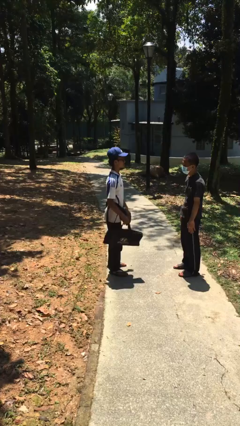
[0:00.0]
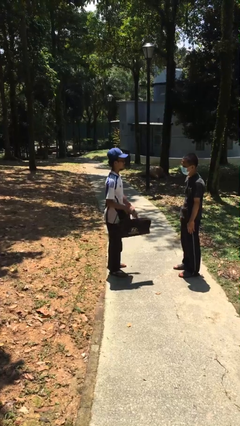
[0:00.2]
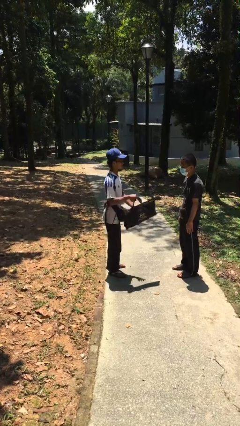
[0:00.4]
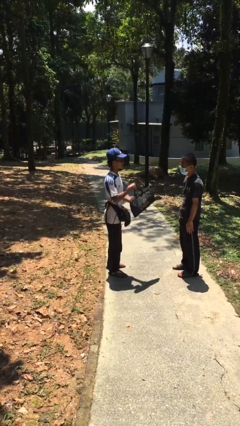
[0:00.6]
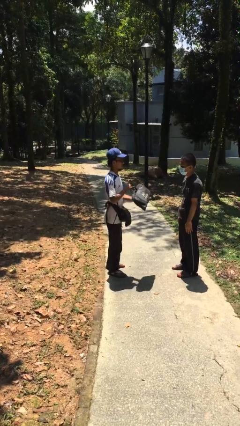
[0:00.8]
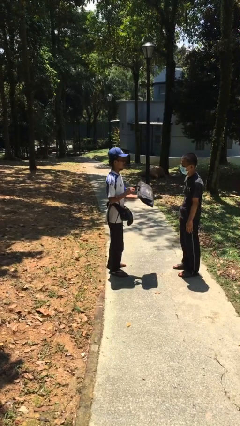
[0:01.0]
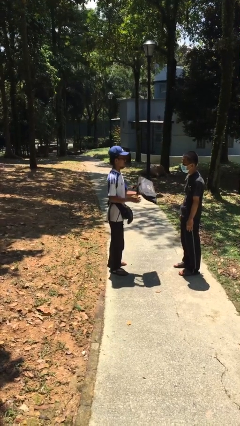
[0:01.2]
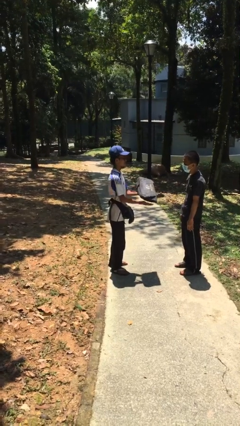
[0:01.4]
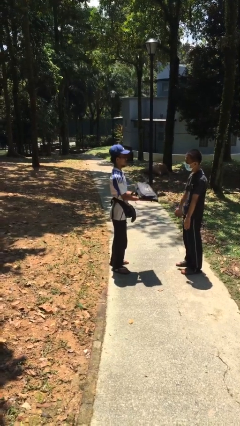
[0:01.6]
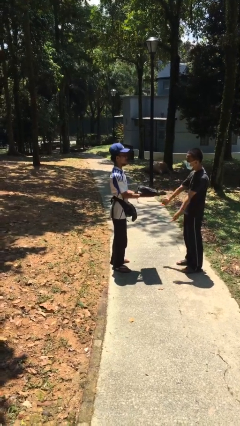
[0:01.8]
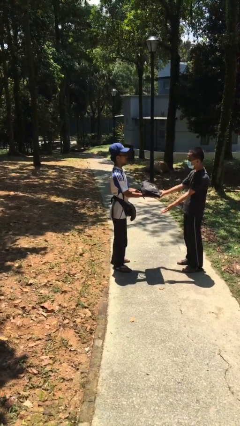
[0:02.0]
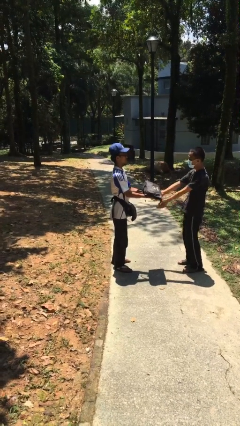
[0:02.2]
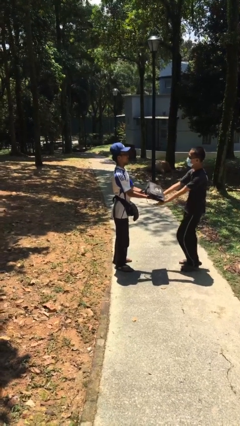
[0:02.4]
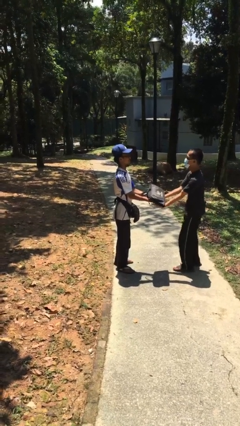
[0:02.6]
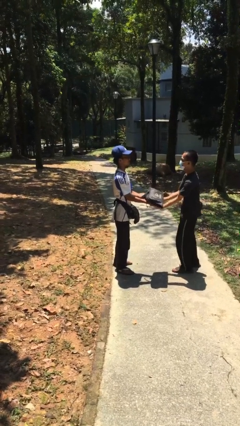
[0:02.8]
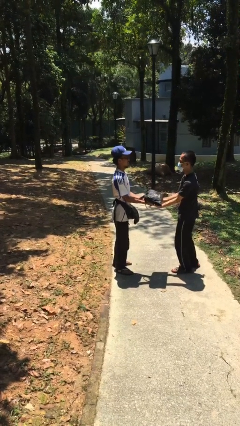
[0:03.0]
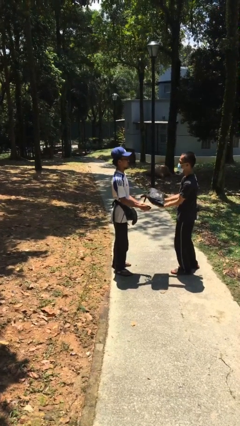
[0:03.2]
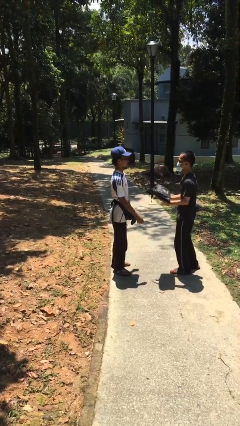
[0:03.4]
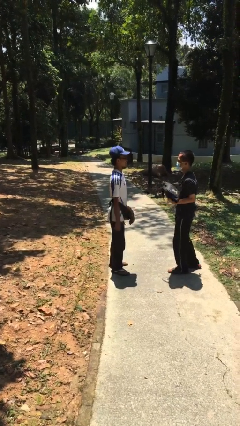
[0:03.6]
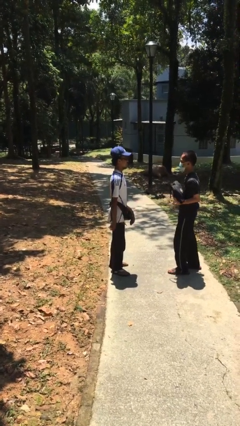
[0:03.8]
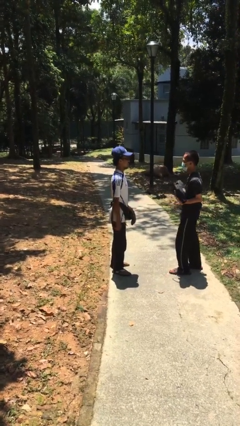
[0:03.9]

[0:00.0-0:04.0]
person transfers object to person

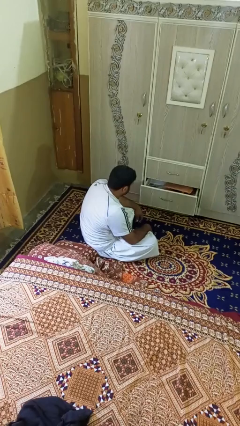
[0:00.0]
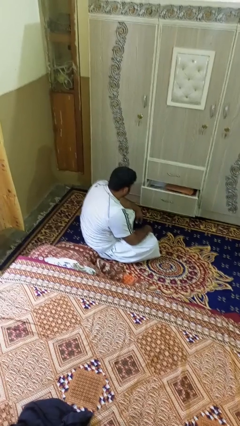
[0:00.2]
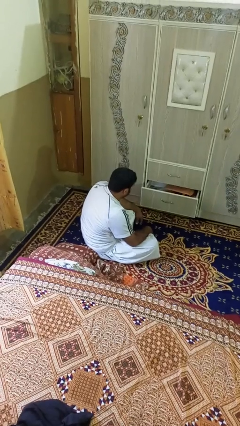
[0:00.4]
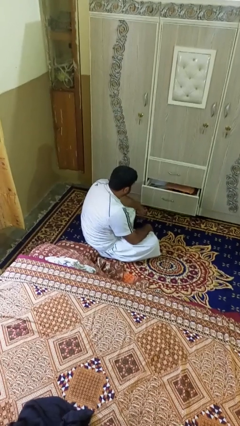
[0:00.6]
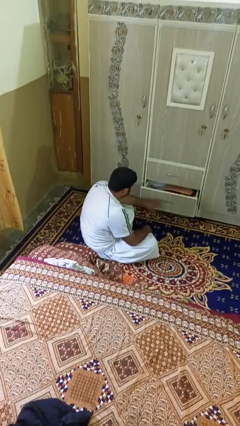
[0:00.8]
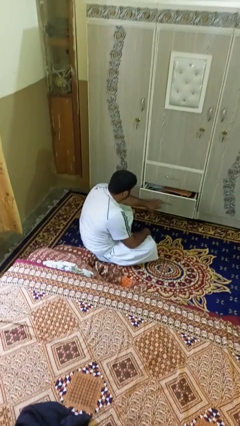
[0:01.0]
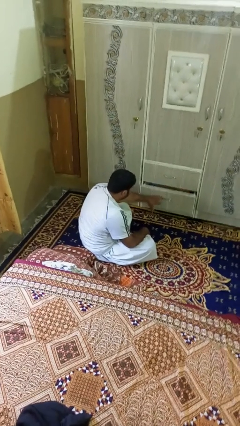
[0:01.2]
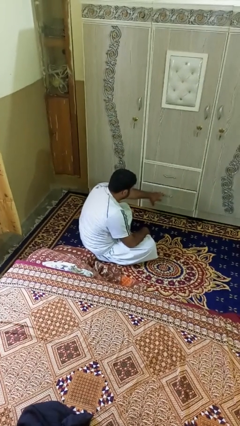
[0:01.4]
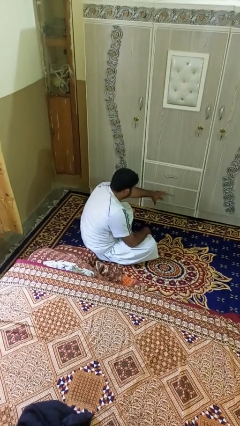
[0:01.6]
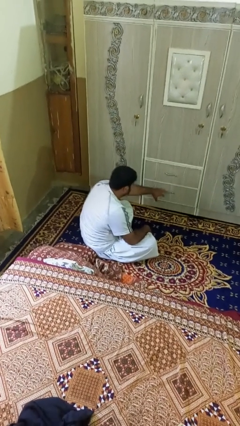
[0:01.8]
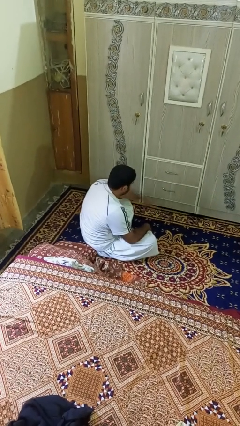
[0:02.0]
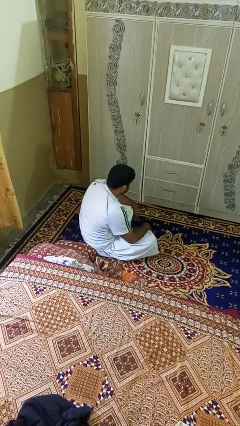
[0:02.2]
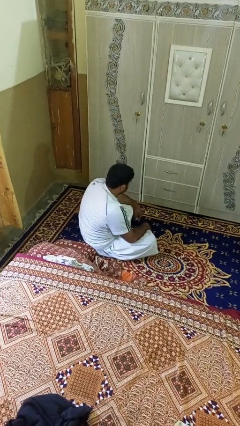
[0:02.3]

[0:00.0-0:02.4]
person closes dresser drawer

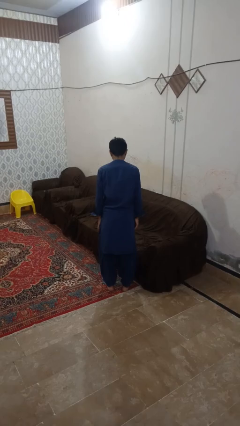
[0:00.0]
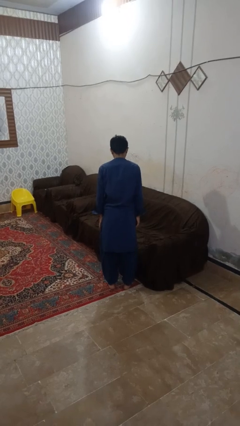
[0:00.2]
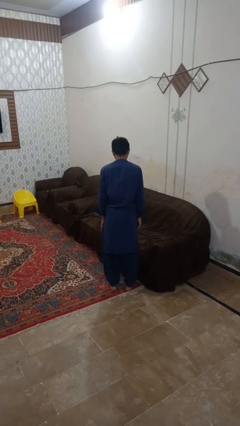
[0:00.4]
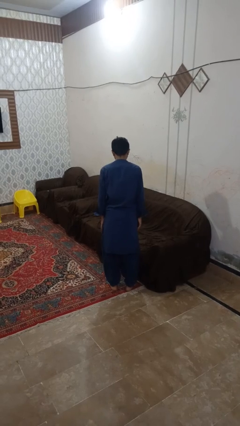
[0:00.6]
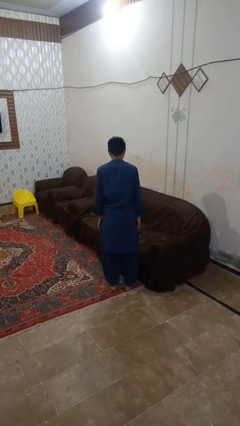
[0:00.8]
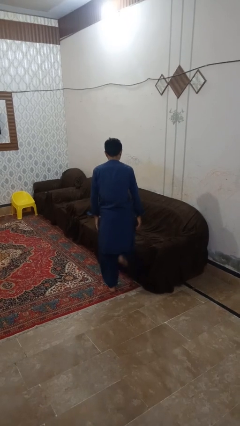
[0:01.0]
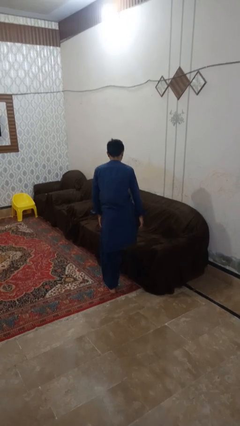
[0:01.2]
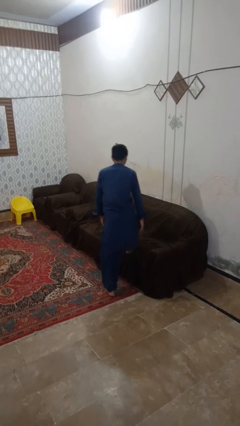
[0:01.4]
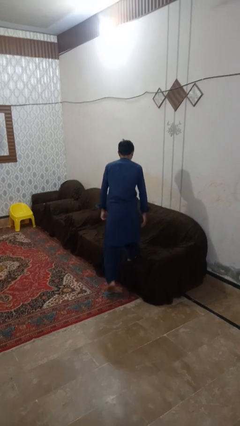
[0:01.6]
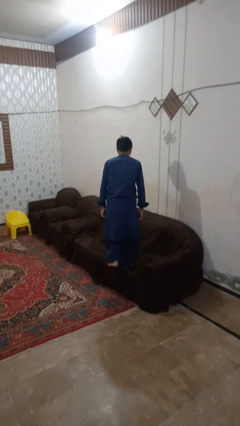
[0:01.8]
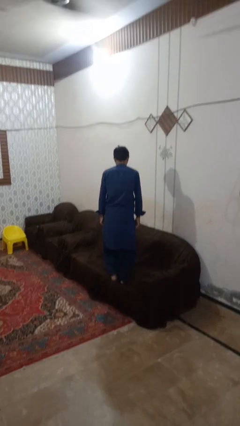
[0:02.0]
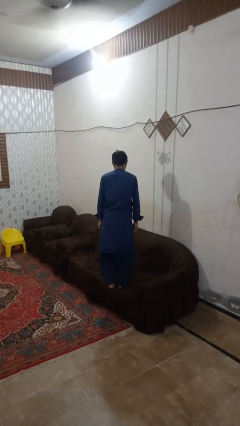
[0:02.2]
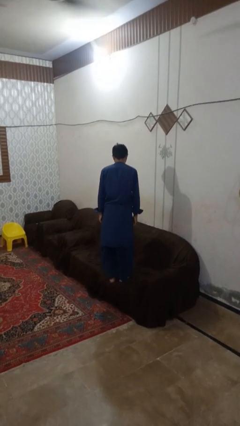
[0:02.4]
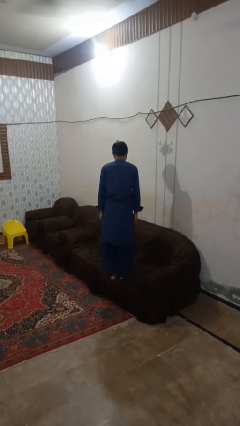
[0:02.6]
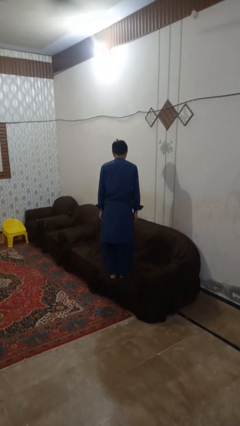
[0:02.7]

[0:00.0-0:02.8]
person climbs on couch

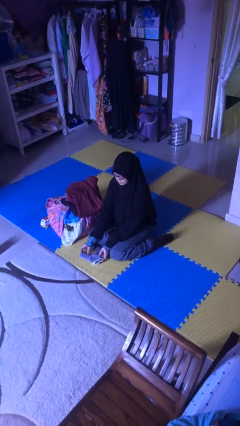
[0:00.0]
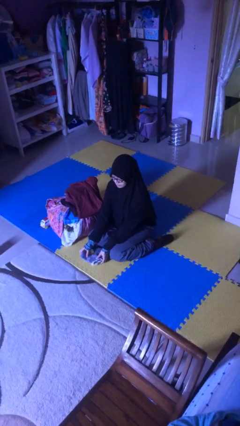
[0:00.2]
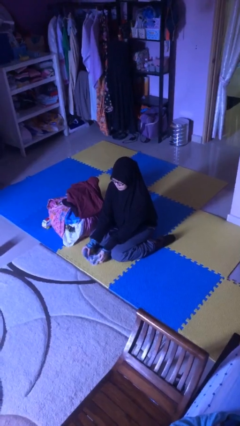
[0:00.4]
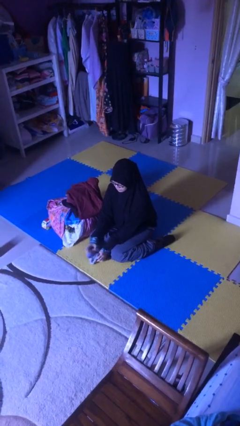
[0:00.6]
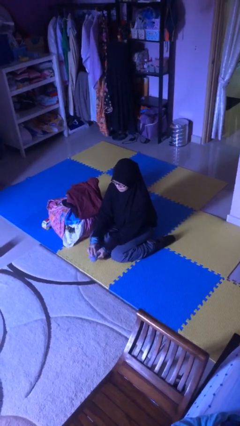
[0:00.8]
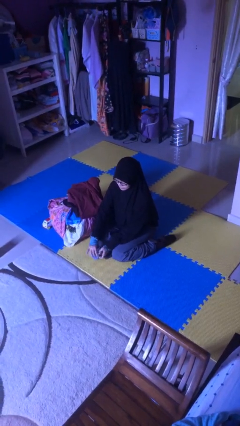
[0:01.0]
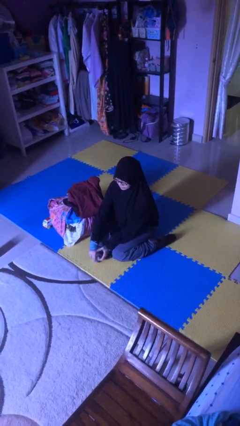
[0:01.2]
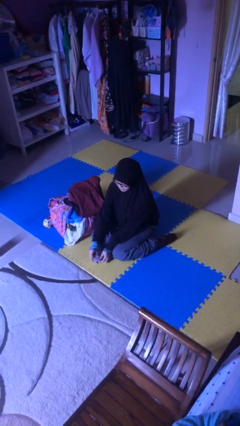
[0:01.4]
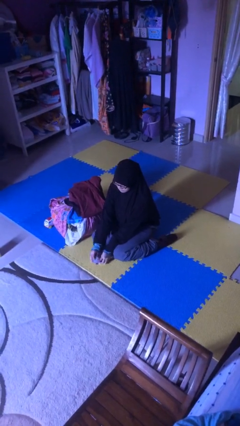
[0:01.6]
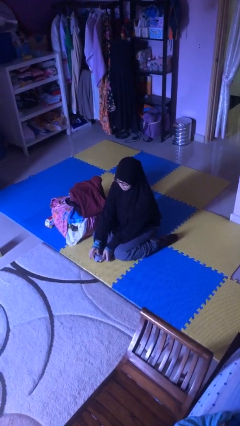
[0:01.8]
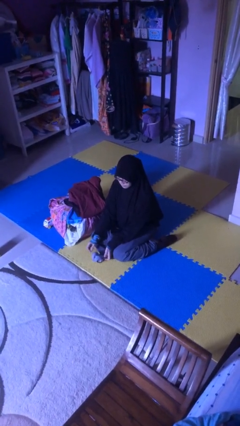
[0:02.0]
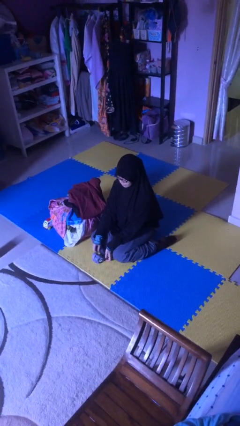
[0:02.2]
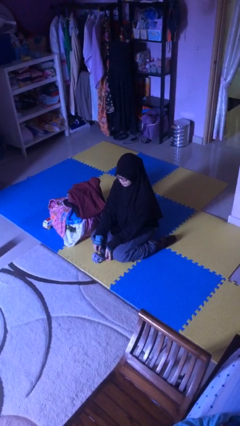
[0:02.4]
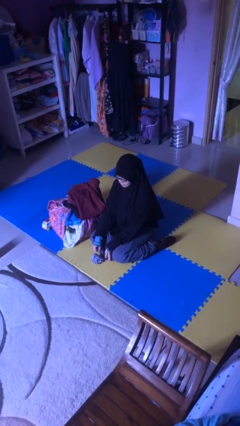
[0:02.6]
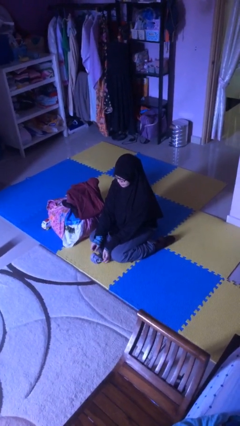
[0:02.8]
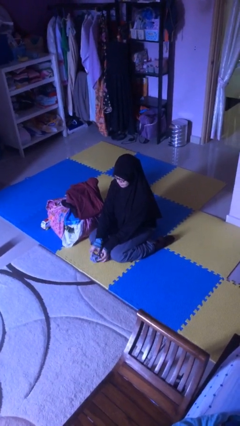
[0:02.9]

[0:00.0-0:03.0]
person folds socks

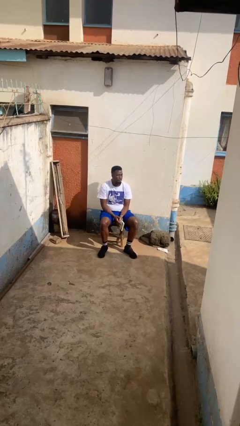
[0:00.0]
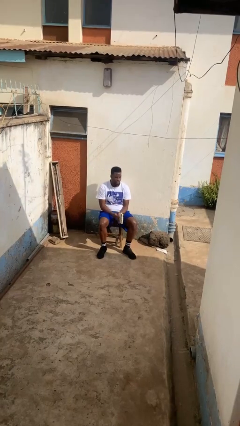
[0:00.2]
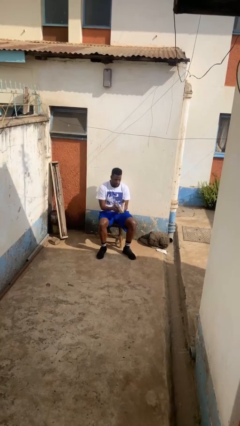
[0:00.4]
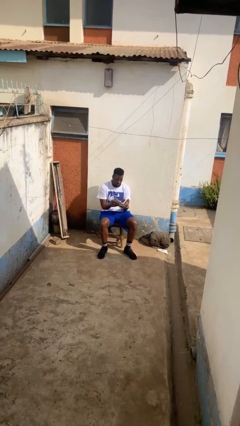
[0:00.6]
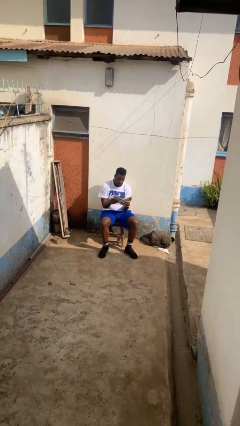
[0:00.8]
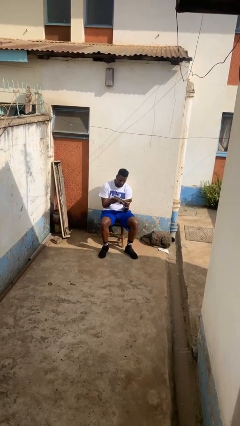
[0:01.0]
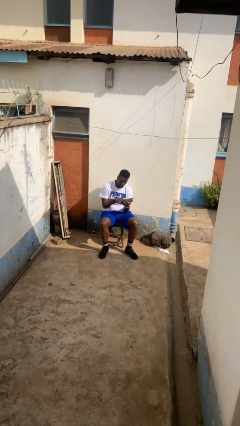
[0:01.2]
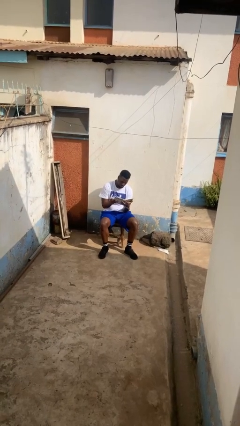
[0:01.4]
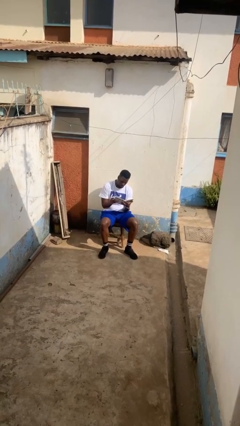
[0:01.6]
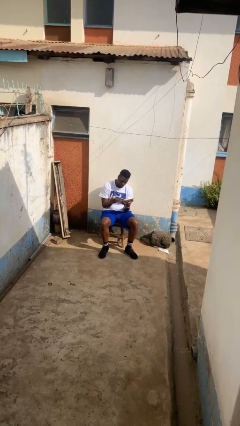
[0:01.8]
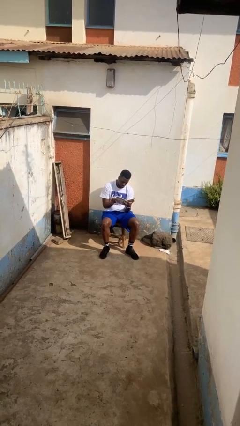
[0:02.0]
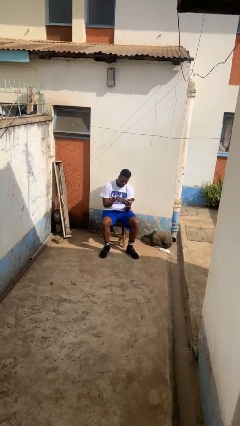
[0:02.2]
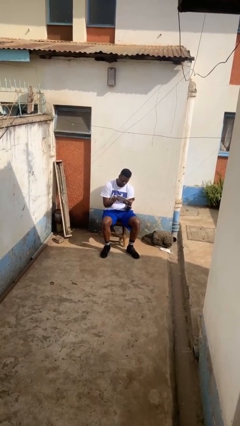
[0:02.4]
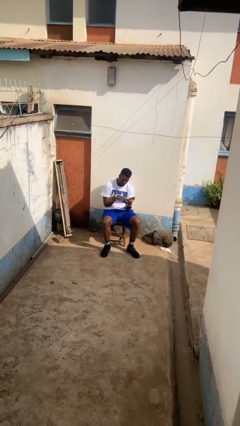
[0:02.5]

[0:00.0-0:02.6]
person reads book

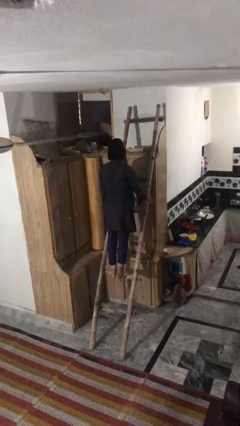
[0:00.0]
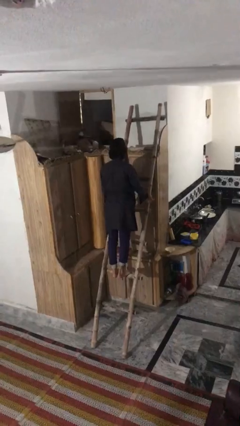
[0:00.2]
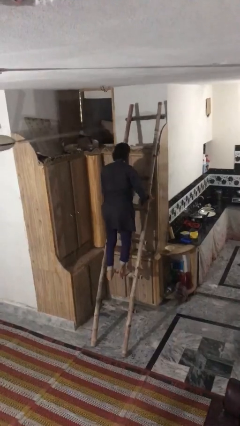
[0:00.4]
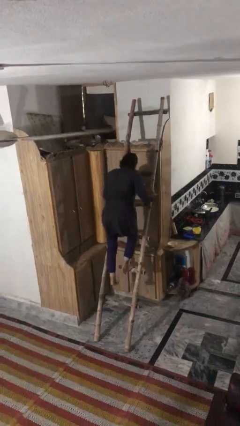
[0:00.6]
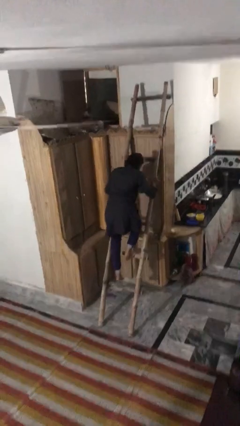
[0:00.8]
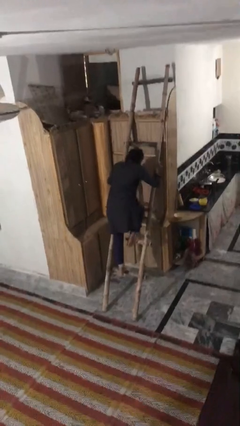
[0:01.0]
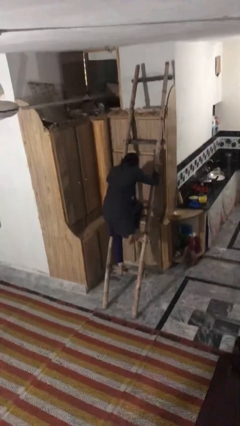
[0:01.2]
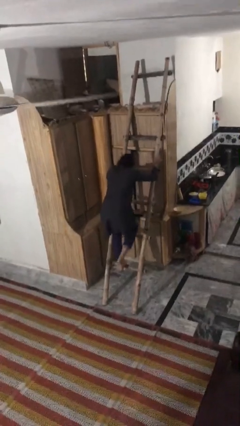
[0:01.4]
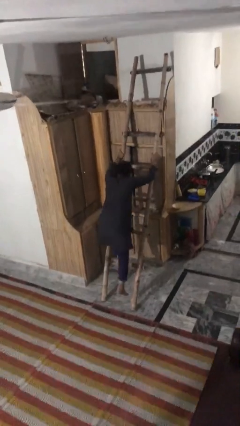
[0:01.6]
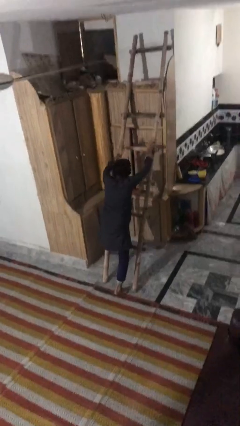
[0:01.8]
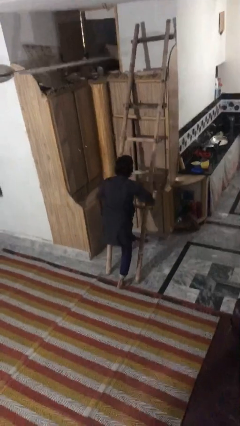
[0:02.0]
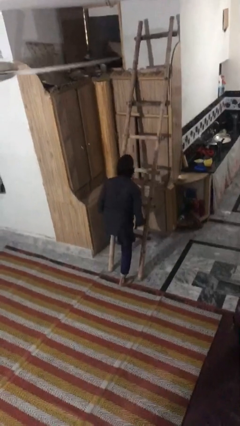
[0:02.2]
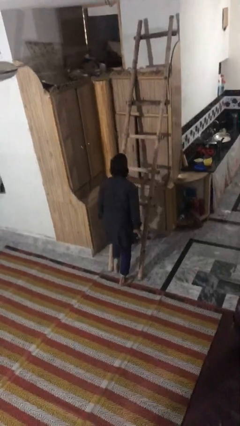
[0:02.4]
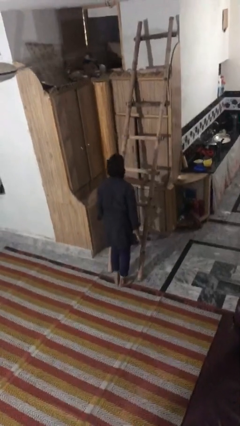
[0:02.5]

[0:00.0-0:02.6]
person climbs down ladder
